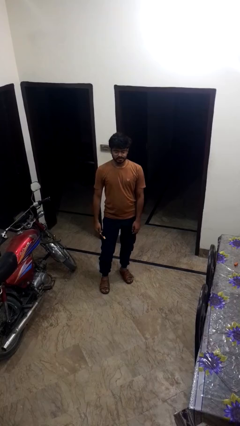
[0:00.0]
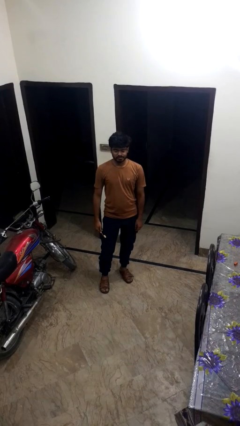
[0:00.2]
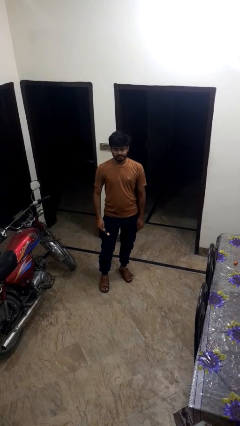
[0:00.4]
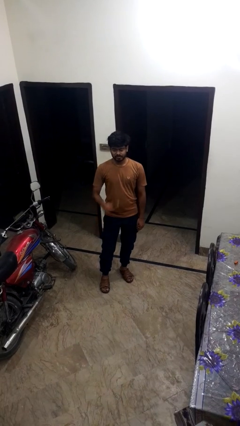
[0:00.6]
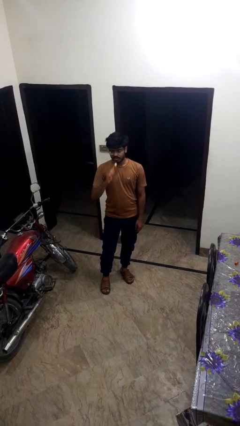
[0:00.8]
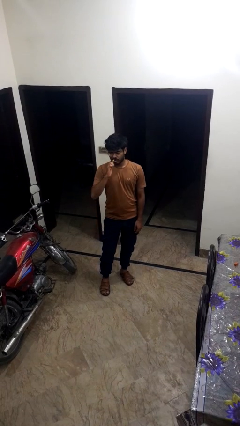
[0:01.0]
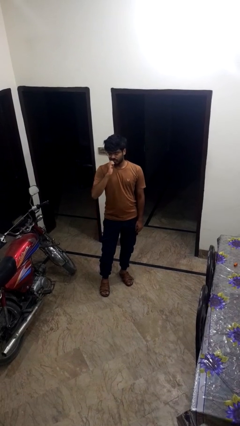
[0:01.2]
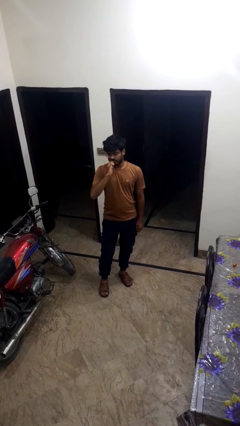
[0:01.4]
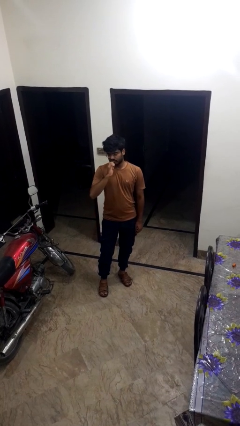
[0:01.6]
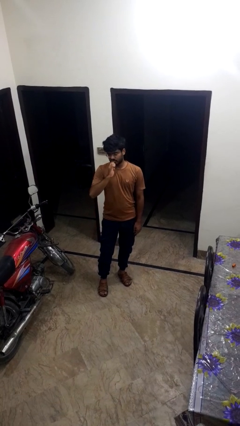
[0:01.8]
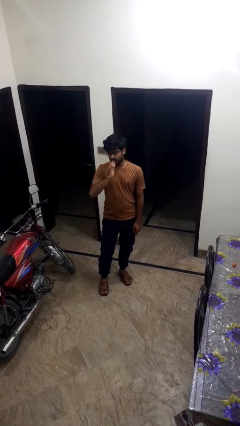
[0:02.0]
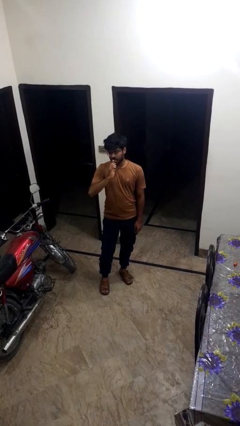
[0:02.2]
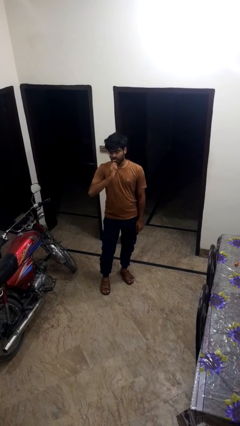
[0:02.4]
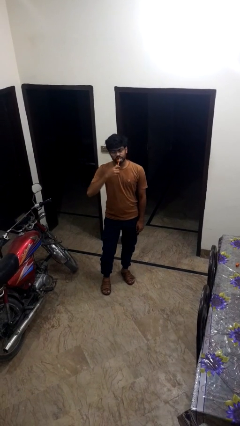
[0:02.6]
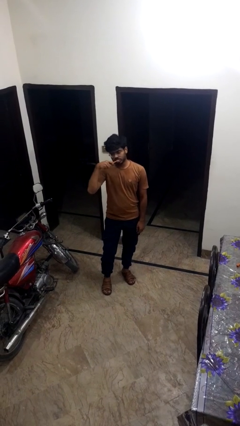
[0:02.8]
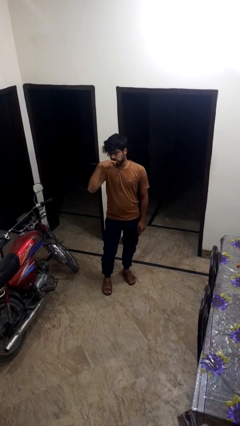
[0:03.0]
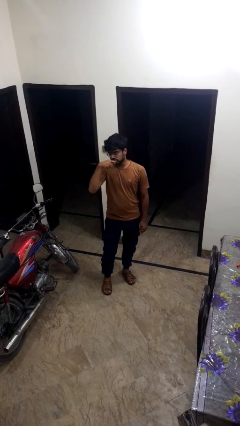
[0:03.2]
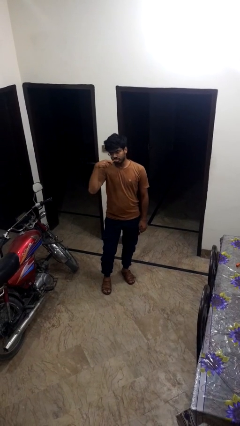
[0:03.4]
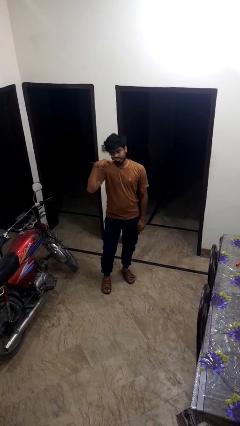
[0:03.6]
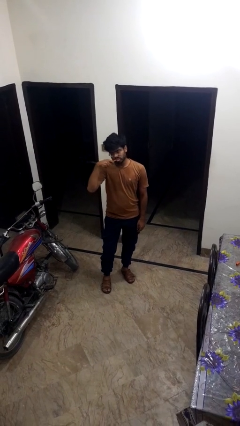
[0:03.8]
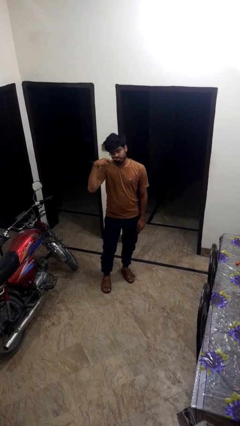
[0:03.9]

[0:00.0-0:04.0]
person brushes teeth

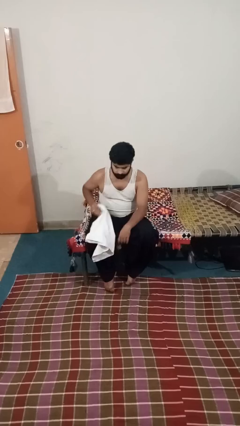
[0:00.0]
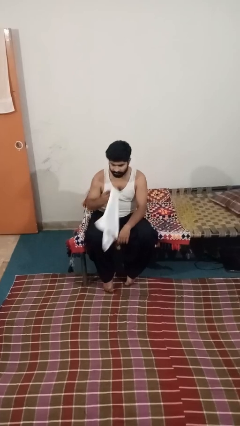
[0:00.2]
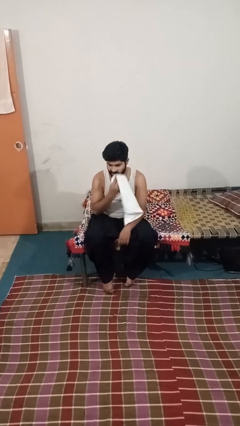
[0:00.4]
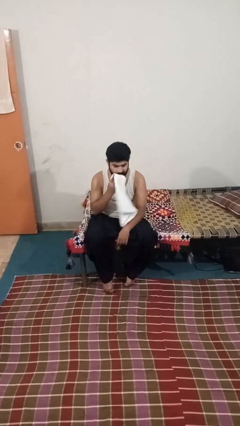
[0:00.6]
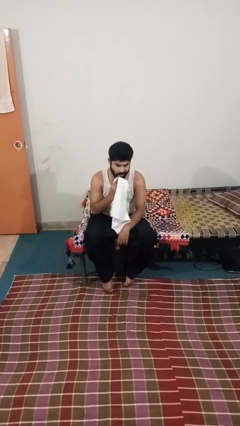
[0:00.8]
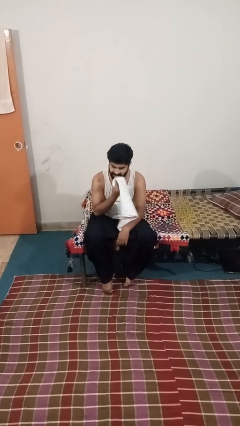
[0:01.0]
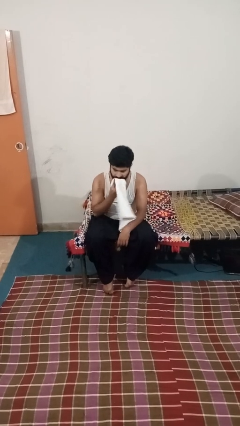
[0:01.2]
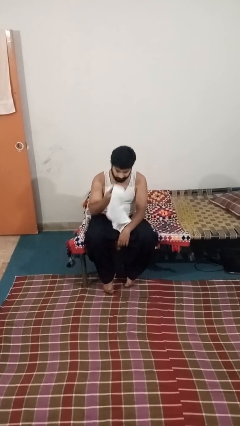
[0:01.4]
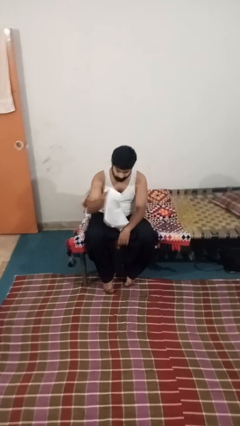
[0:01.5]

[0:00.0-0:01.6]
person wipes mouth with napkin

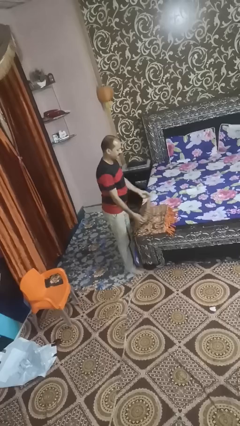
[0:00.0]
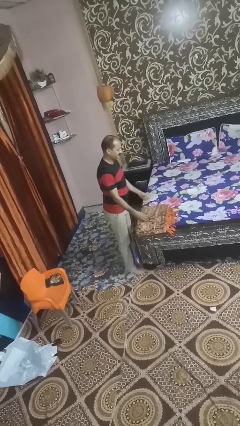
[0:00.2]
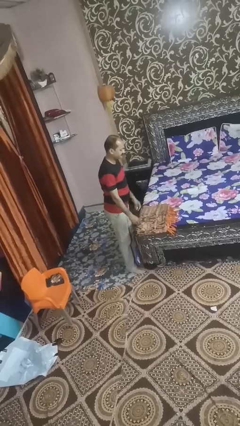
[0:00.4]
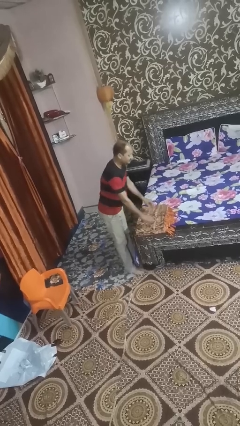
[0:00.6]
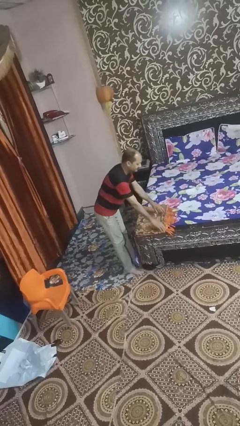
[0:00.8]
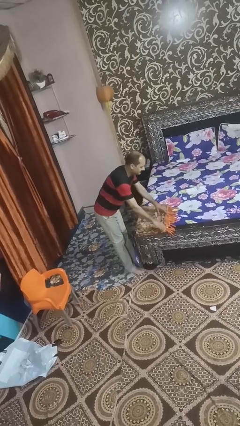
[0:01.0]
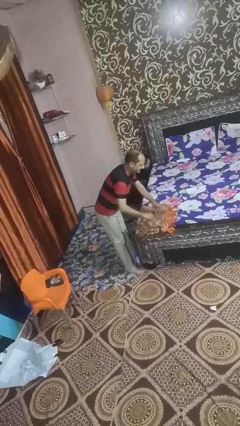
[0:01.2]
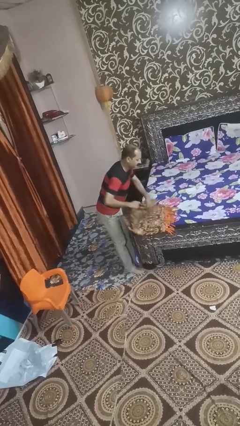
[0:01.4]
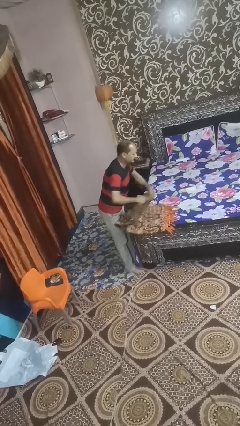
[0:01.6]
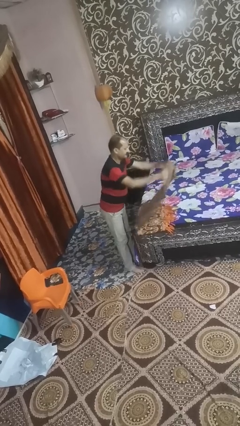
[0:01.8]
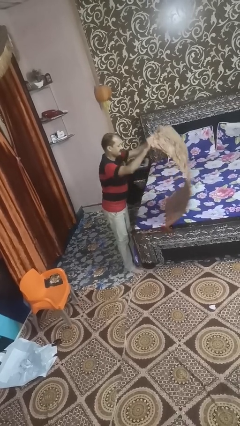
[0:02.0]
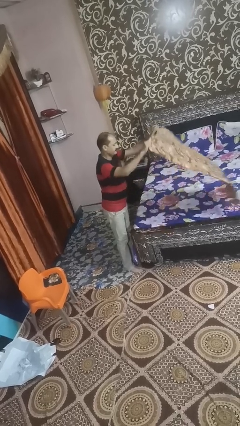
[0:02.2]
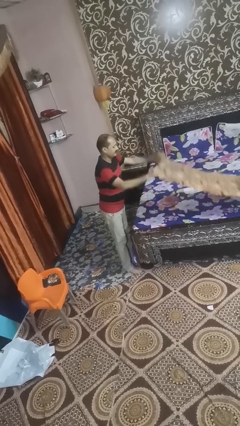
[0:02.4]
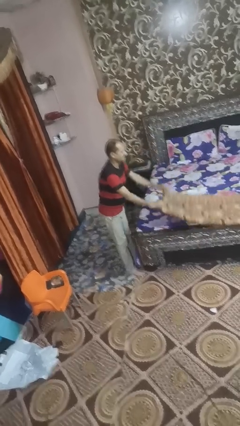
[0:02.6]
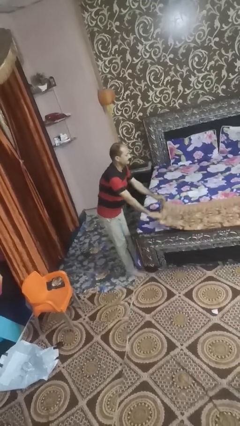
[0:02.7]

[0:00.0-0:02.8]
person unfolds blanket

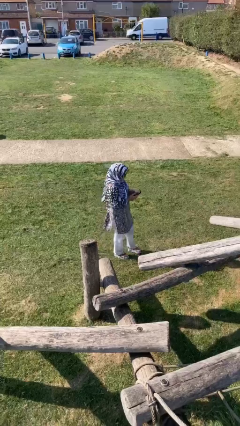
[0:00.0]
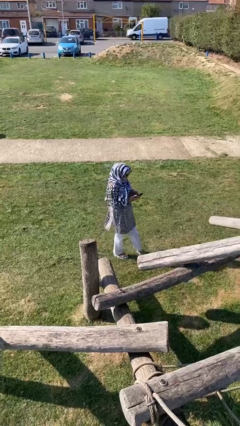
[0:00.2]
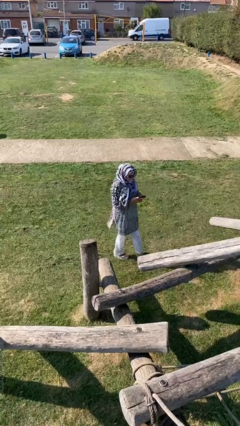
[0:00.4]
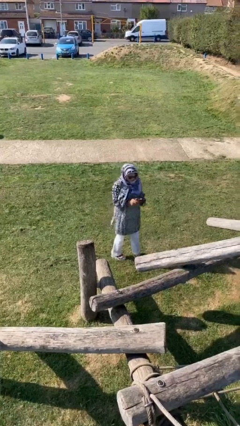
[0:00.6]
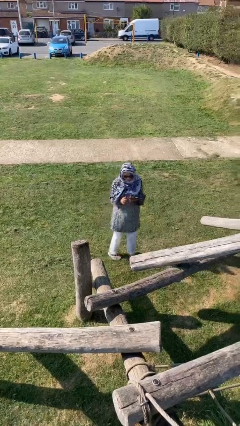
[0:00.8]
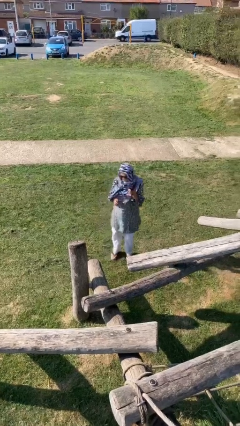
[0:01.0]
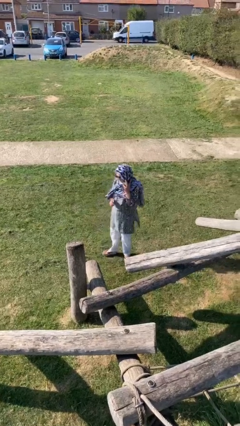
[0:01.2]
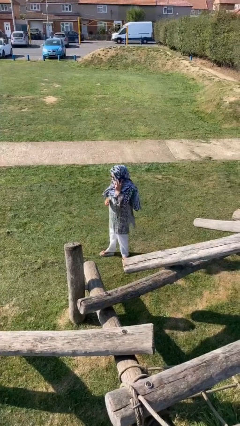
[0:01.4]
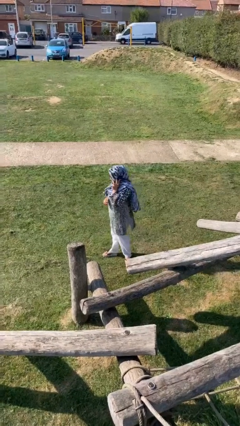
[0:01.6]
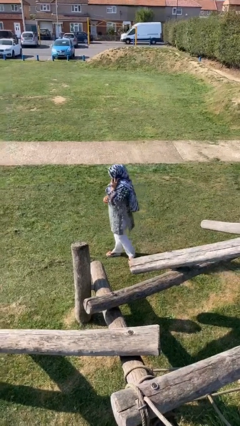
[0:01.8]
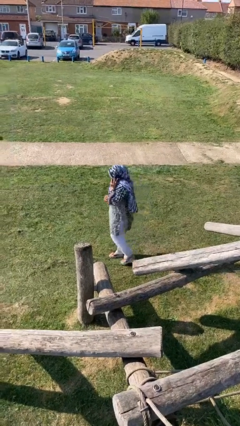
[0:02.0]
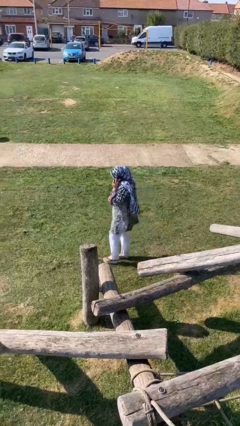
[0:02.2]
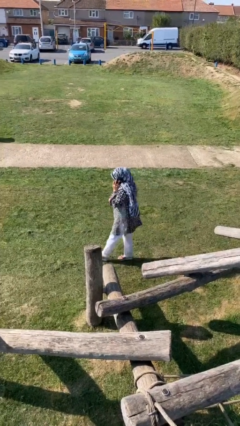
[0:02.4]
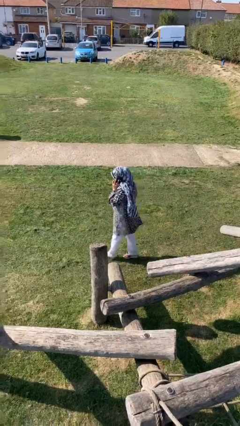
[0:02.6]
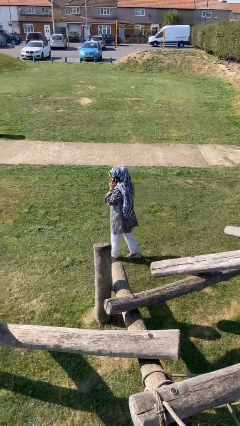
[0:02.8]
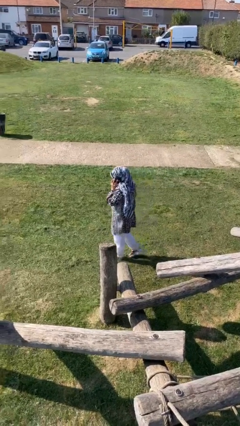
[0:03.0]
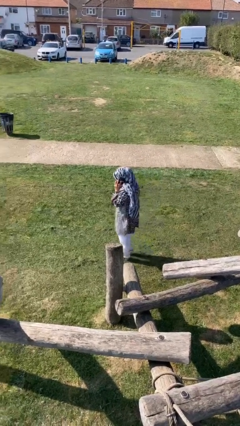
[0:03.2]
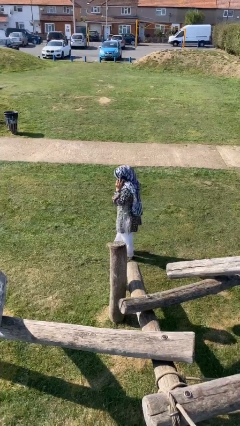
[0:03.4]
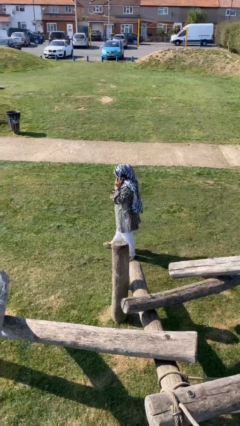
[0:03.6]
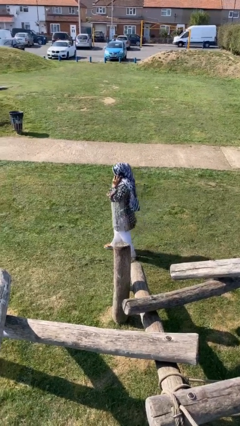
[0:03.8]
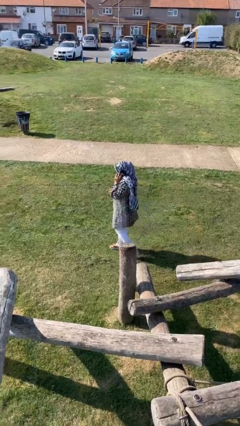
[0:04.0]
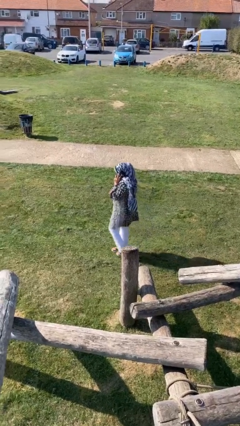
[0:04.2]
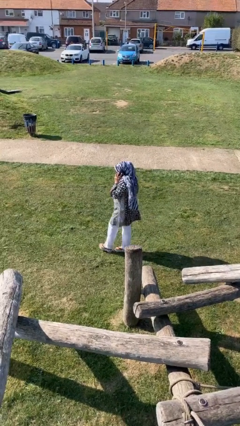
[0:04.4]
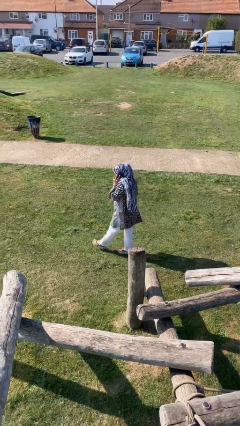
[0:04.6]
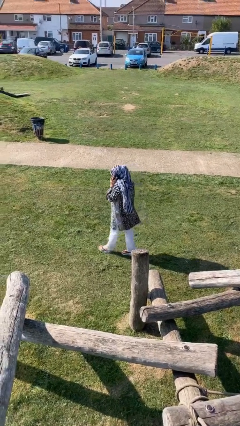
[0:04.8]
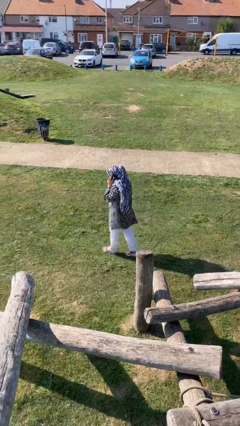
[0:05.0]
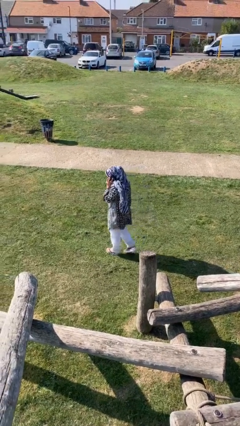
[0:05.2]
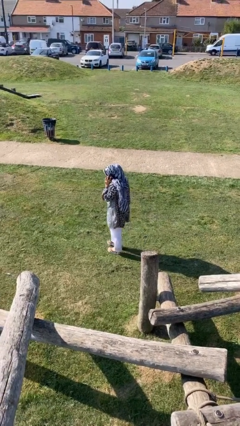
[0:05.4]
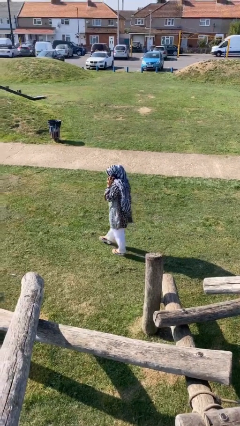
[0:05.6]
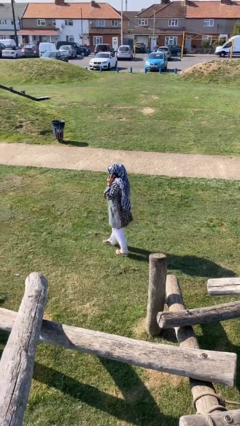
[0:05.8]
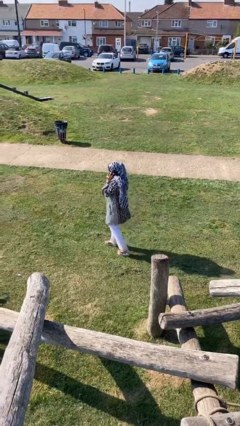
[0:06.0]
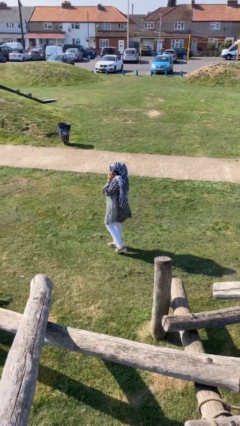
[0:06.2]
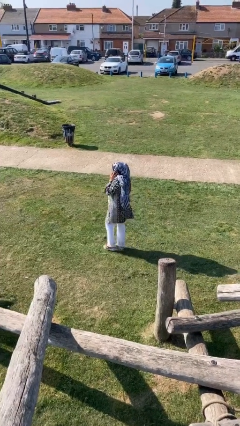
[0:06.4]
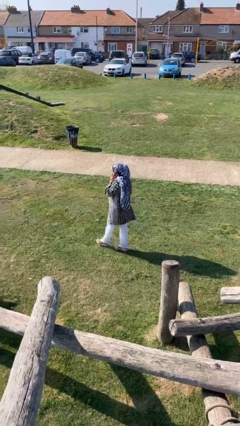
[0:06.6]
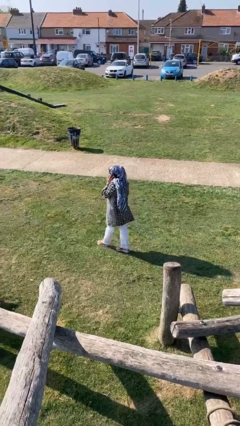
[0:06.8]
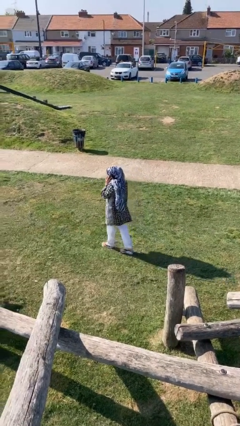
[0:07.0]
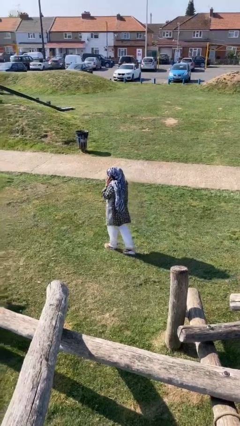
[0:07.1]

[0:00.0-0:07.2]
person talks on phone

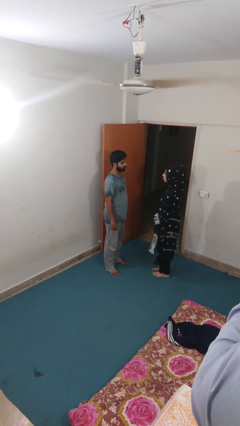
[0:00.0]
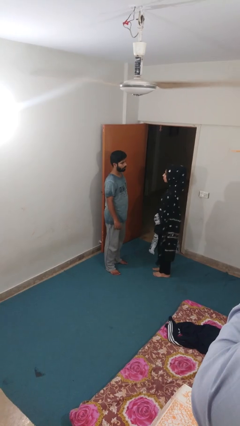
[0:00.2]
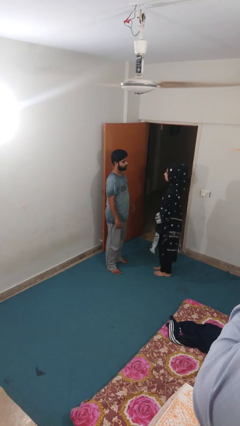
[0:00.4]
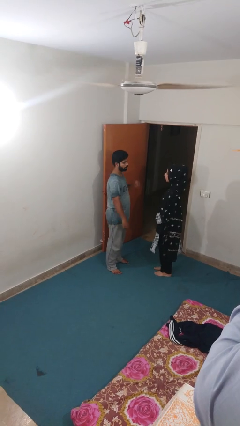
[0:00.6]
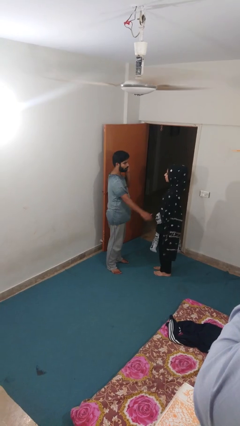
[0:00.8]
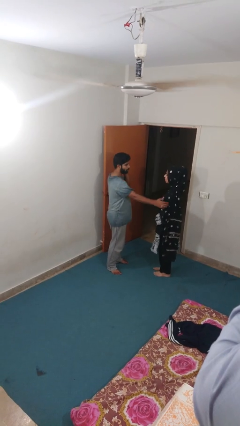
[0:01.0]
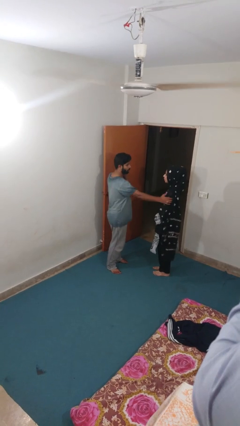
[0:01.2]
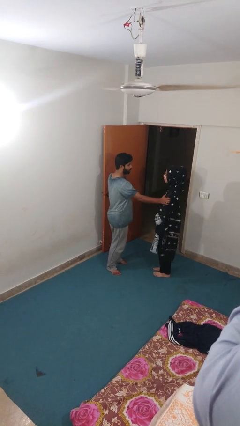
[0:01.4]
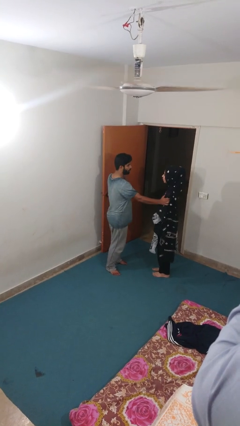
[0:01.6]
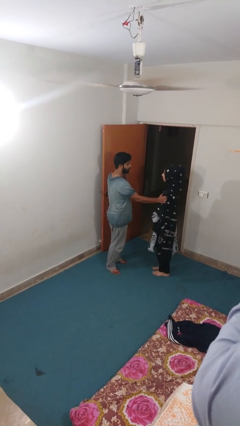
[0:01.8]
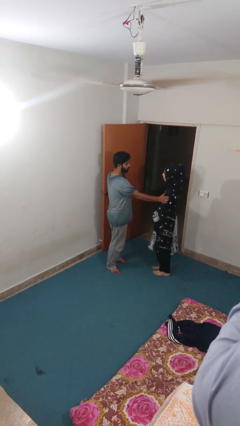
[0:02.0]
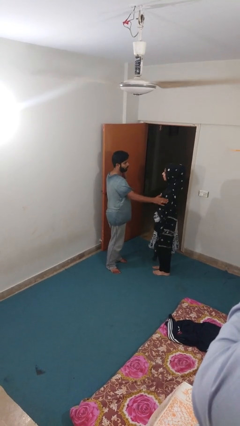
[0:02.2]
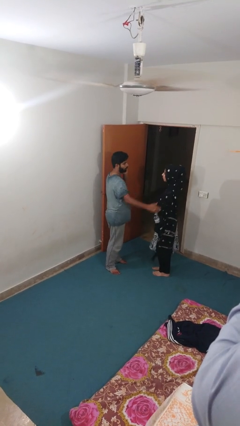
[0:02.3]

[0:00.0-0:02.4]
person grabs person by bicep
